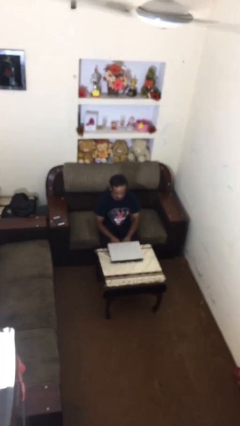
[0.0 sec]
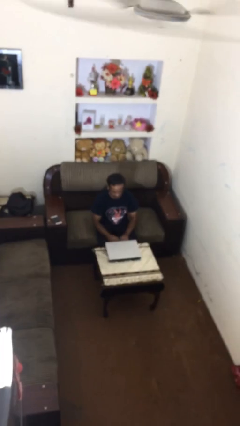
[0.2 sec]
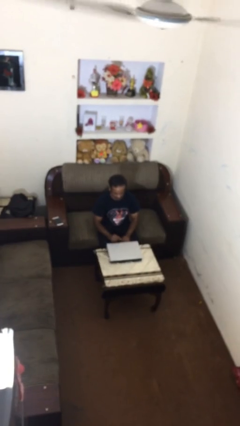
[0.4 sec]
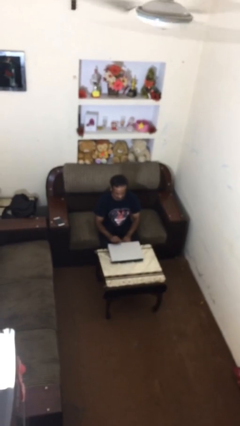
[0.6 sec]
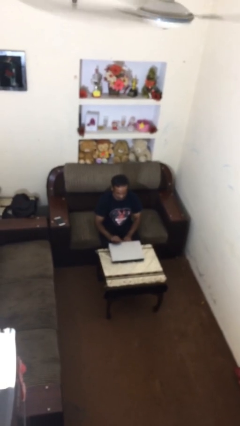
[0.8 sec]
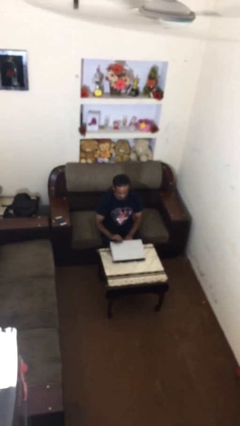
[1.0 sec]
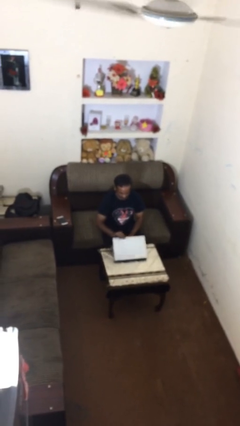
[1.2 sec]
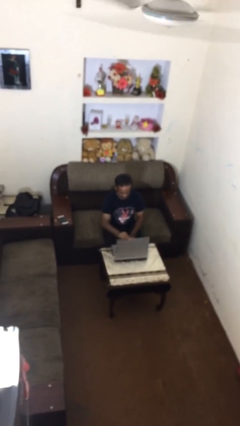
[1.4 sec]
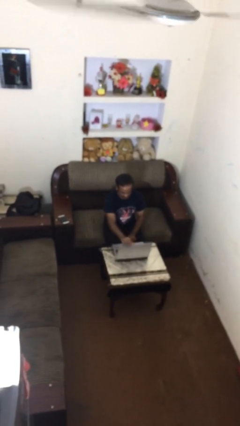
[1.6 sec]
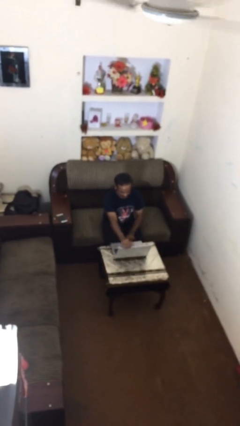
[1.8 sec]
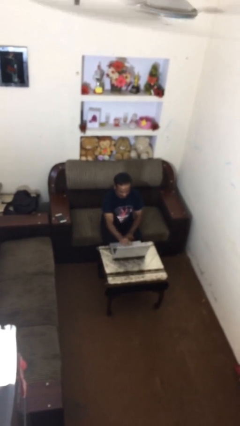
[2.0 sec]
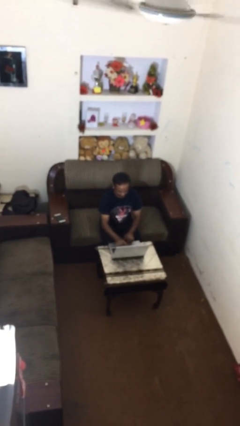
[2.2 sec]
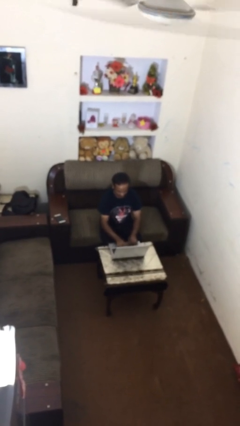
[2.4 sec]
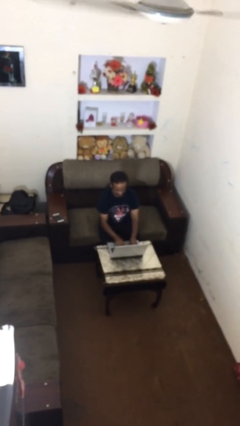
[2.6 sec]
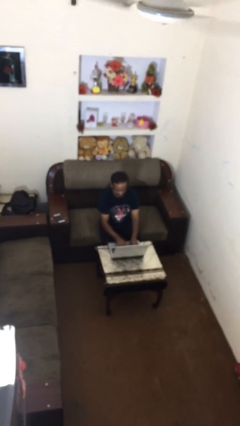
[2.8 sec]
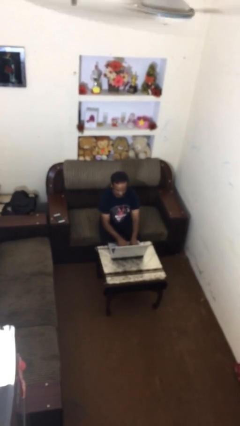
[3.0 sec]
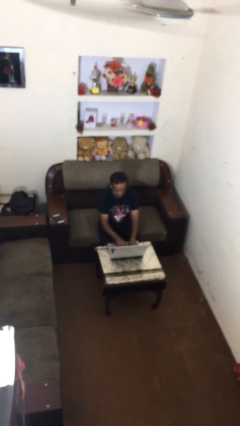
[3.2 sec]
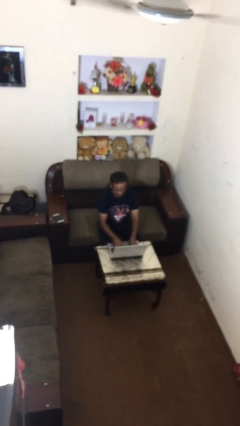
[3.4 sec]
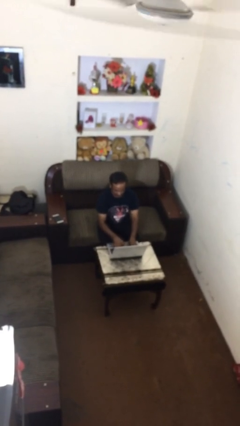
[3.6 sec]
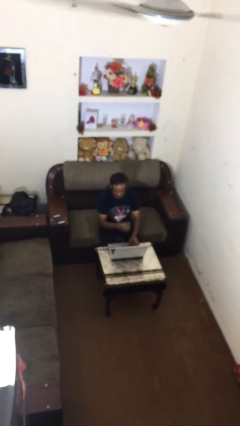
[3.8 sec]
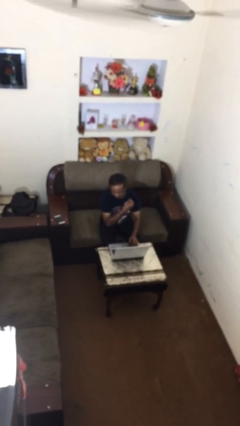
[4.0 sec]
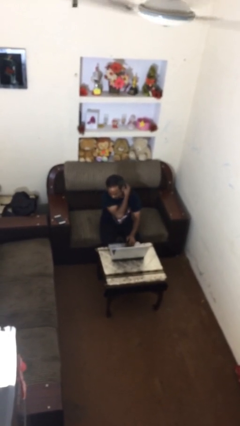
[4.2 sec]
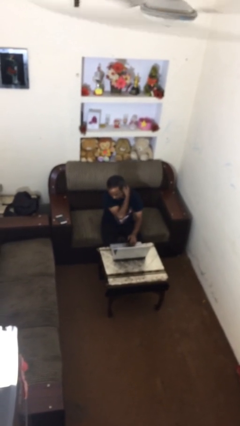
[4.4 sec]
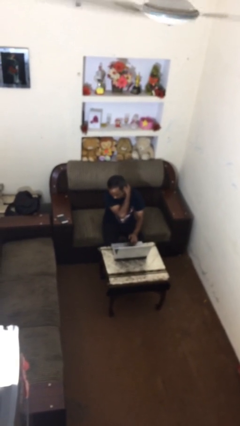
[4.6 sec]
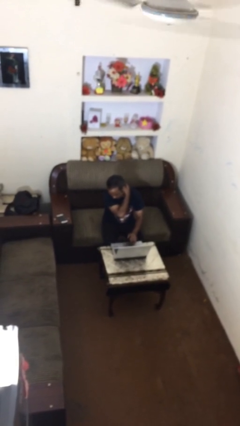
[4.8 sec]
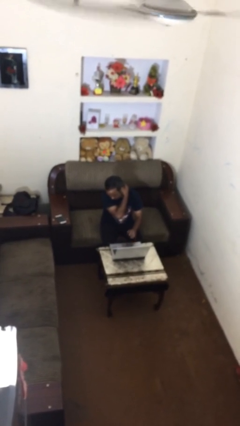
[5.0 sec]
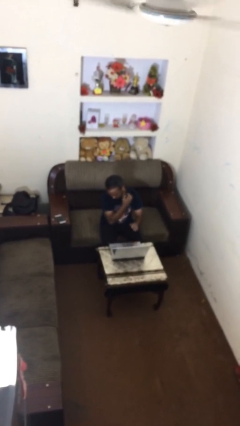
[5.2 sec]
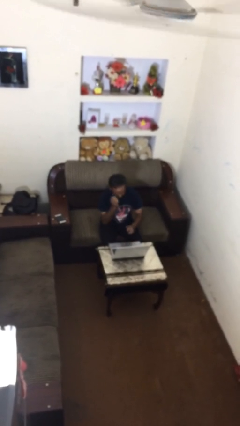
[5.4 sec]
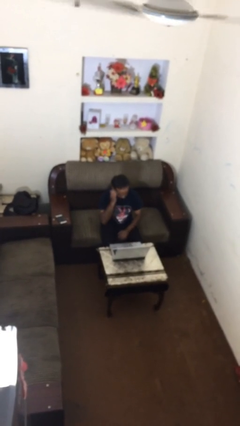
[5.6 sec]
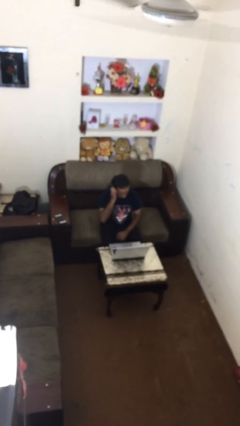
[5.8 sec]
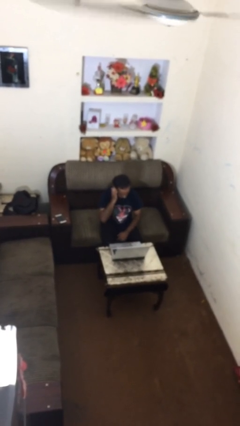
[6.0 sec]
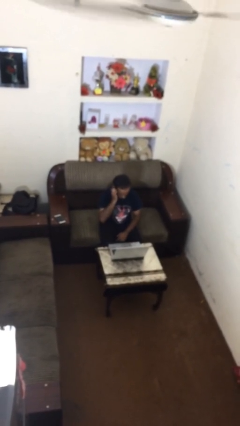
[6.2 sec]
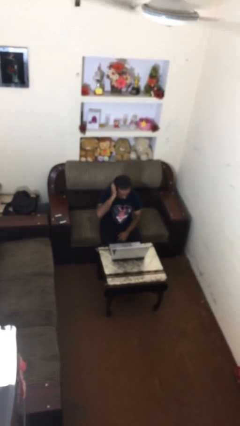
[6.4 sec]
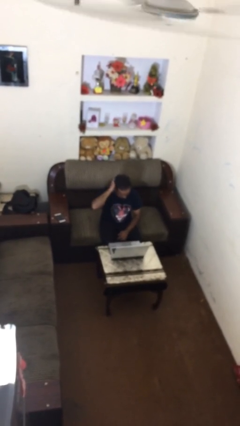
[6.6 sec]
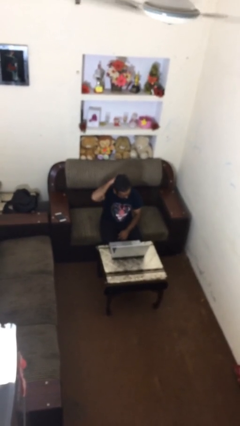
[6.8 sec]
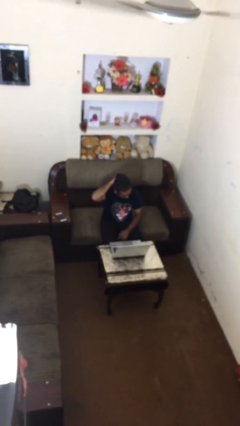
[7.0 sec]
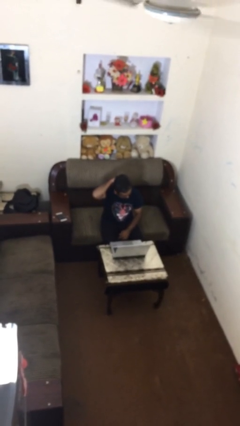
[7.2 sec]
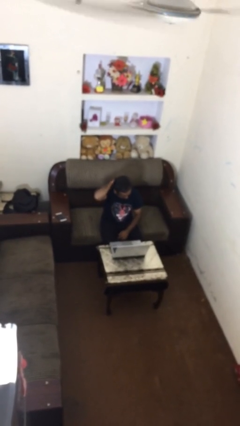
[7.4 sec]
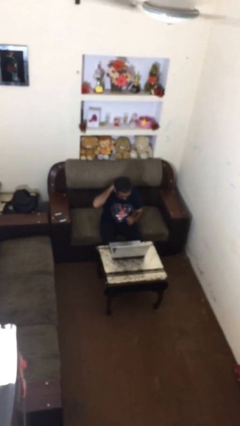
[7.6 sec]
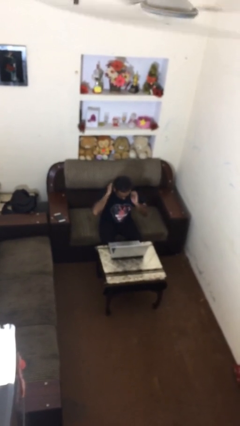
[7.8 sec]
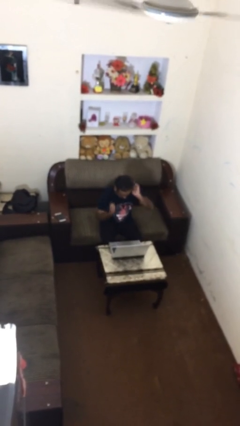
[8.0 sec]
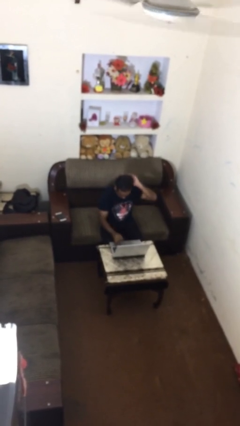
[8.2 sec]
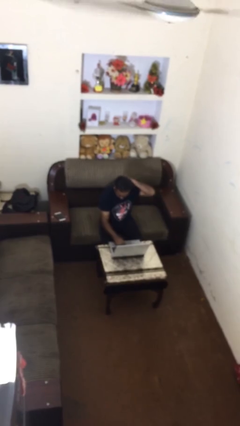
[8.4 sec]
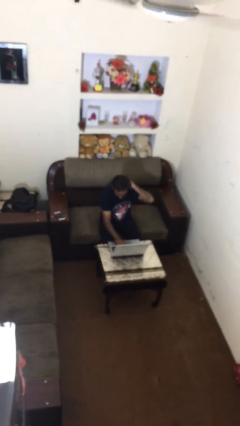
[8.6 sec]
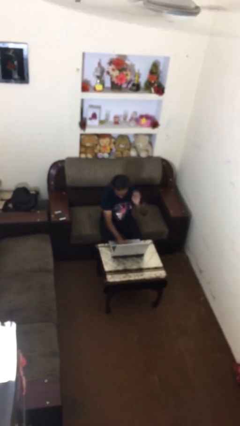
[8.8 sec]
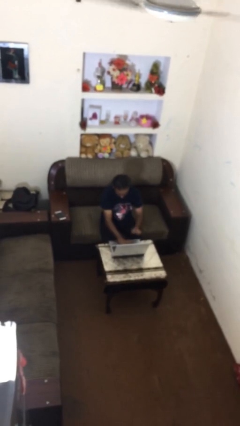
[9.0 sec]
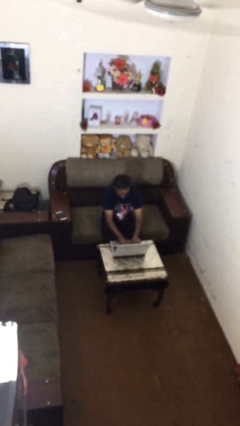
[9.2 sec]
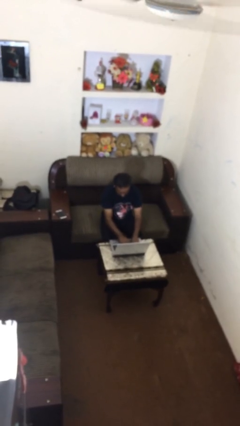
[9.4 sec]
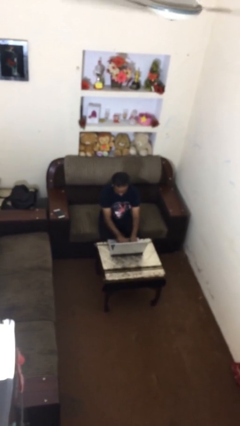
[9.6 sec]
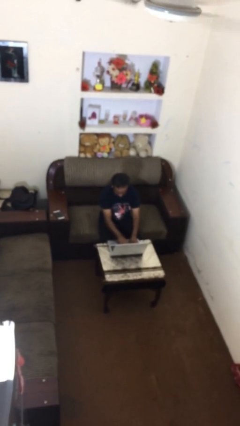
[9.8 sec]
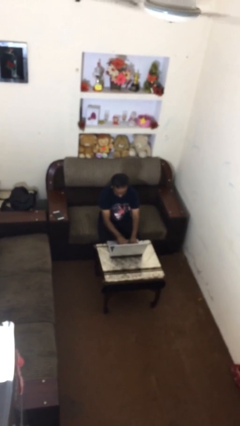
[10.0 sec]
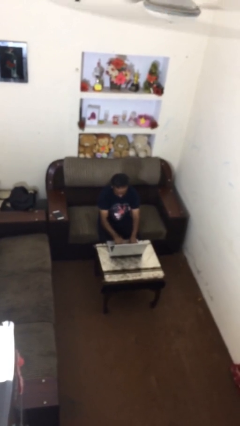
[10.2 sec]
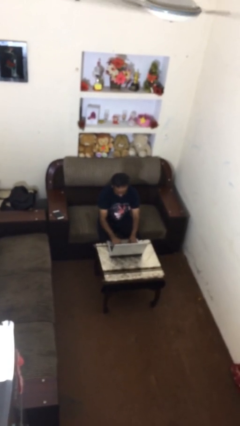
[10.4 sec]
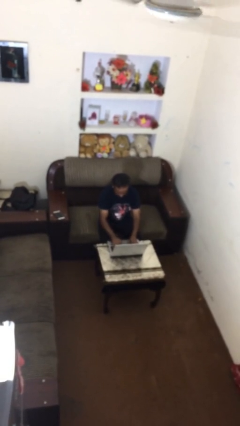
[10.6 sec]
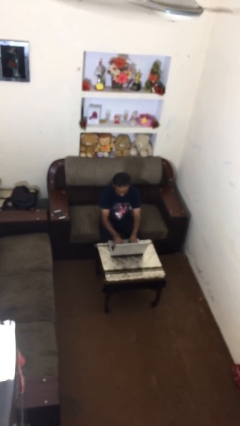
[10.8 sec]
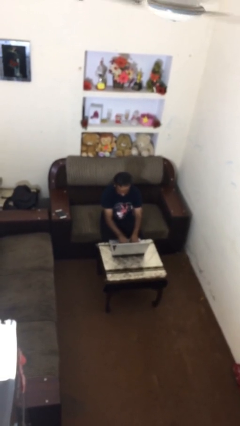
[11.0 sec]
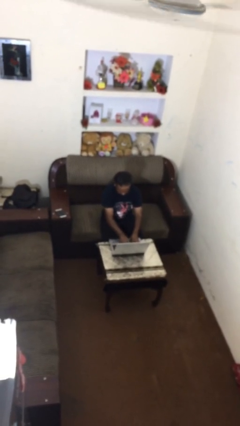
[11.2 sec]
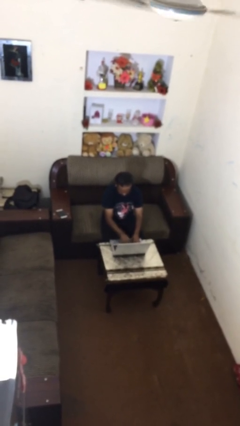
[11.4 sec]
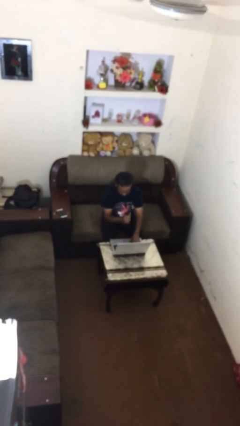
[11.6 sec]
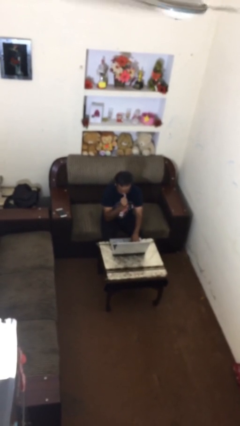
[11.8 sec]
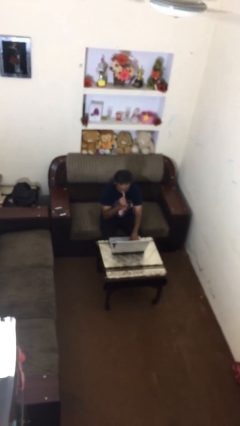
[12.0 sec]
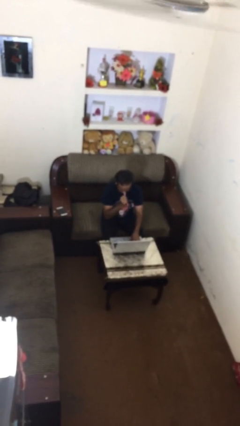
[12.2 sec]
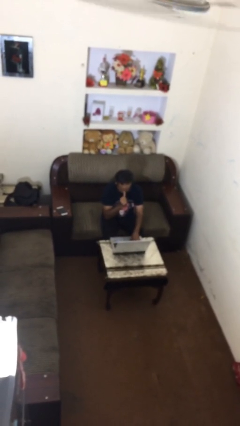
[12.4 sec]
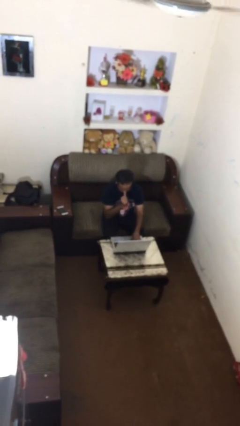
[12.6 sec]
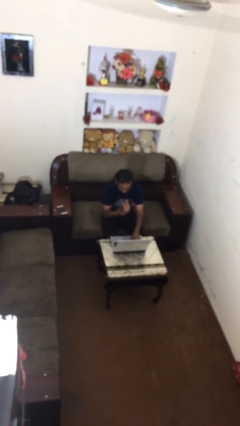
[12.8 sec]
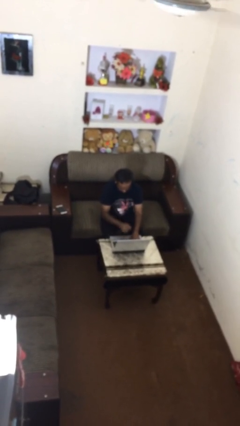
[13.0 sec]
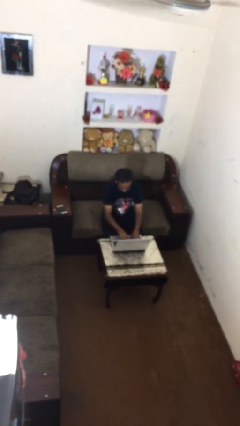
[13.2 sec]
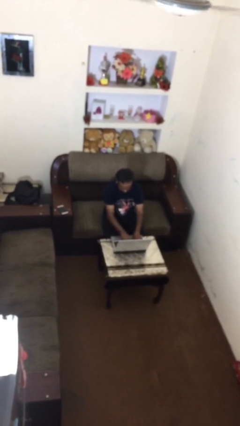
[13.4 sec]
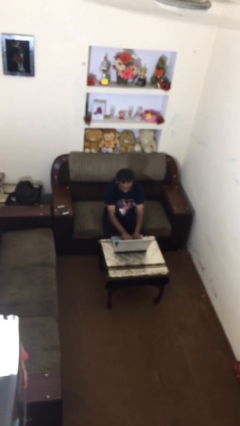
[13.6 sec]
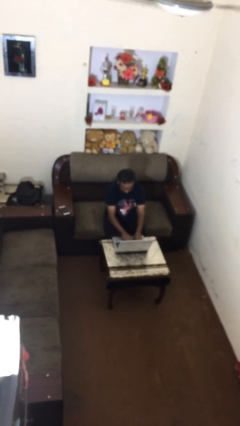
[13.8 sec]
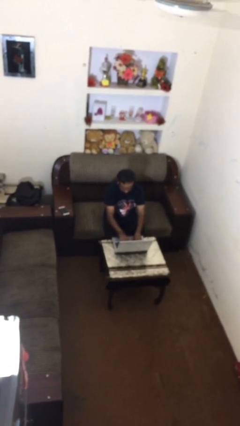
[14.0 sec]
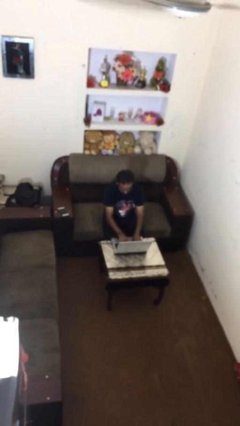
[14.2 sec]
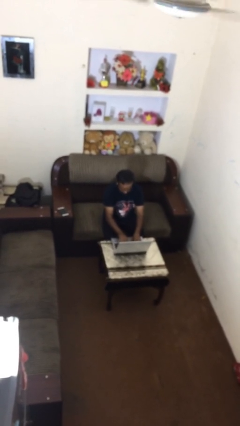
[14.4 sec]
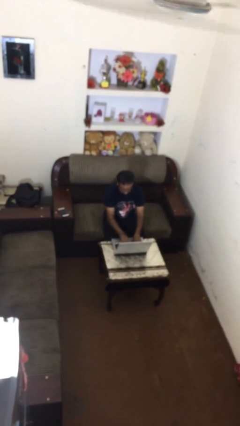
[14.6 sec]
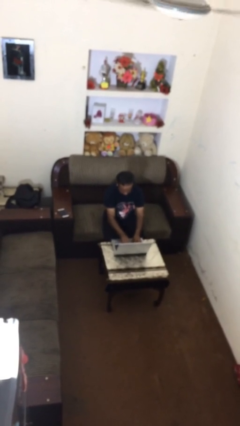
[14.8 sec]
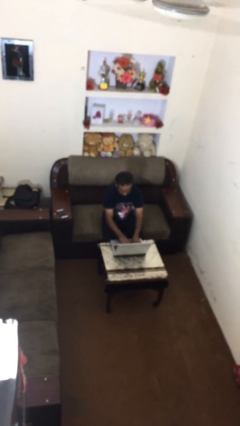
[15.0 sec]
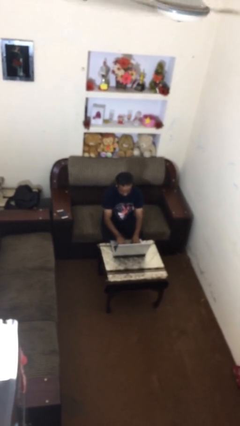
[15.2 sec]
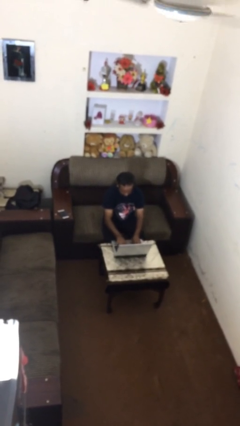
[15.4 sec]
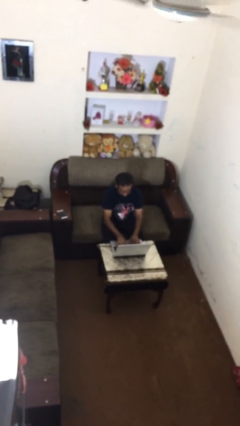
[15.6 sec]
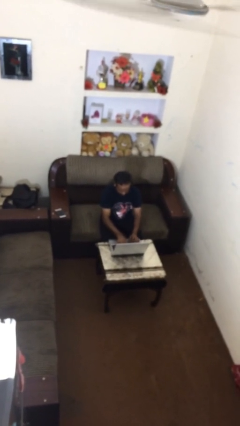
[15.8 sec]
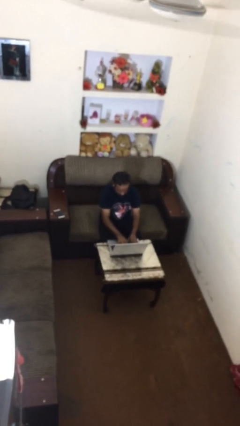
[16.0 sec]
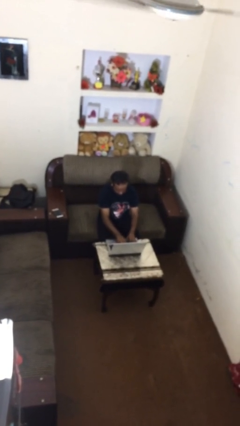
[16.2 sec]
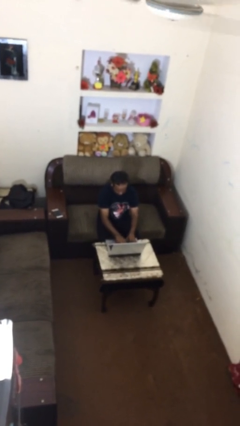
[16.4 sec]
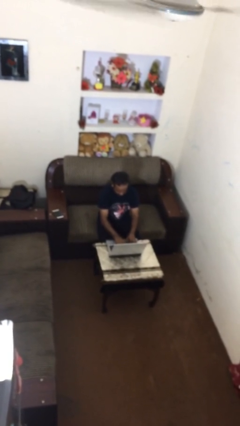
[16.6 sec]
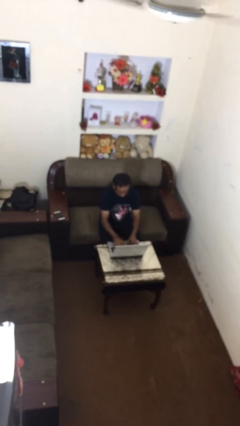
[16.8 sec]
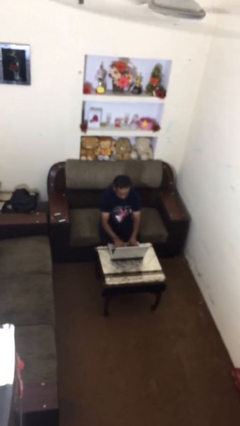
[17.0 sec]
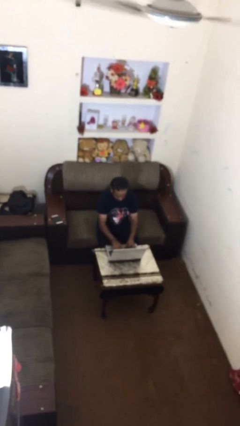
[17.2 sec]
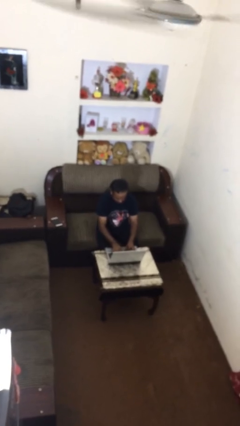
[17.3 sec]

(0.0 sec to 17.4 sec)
person interacts with laptop

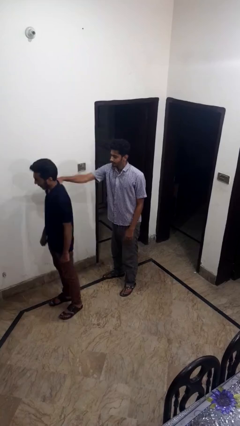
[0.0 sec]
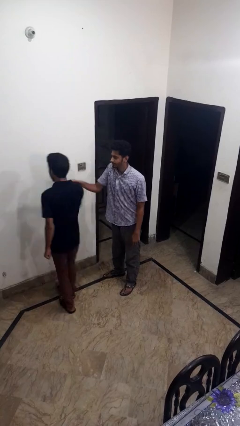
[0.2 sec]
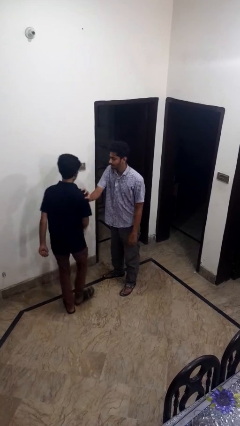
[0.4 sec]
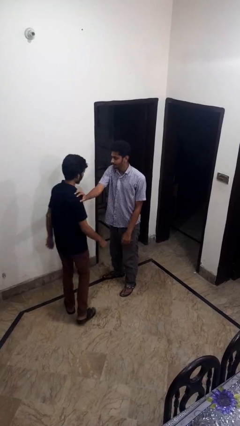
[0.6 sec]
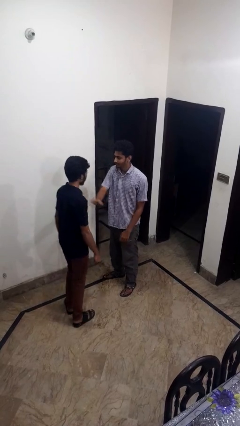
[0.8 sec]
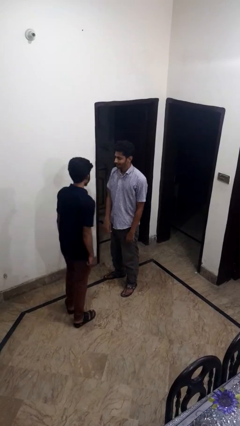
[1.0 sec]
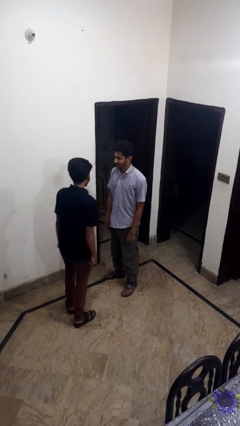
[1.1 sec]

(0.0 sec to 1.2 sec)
person spins person around
